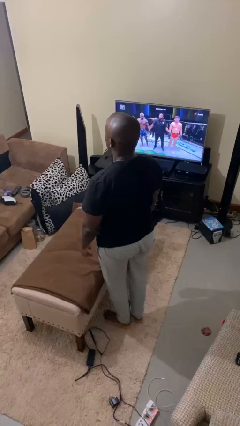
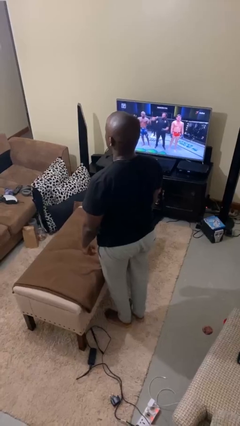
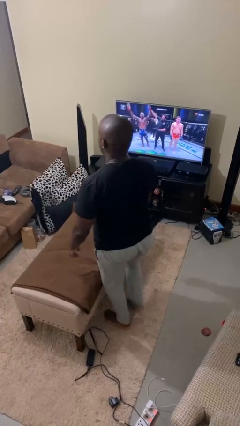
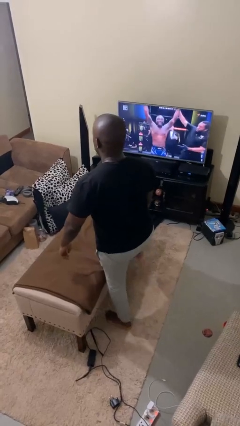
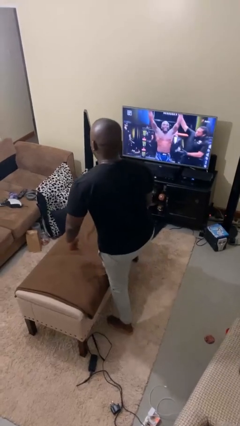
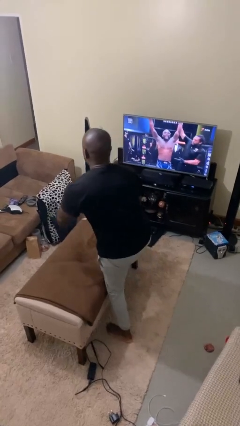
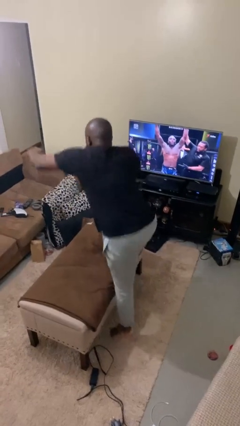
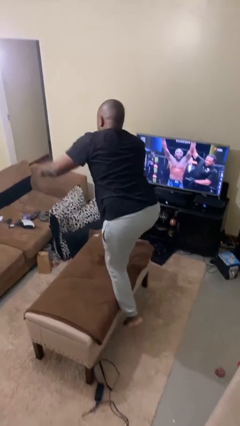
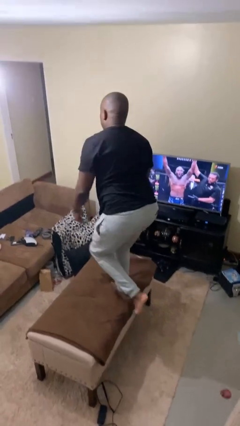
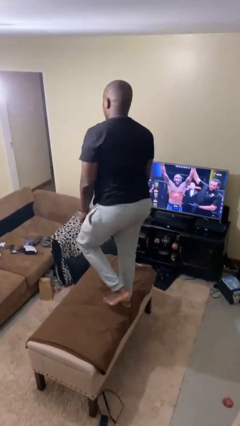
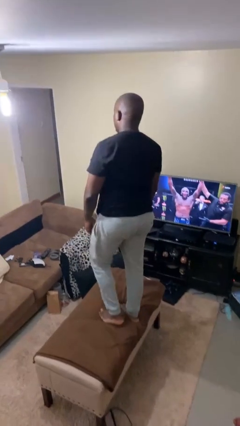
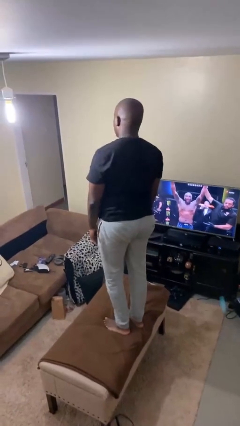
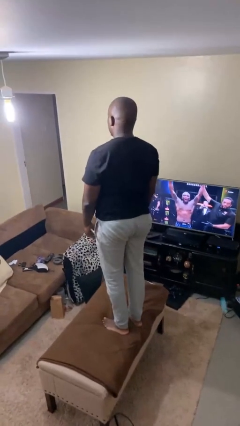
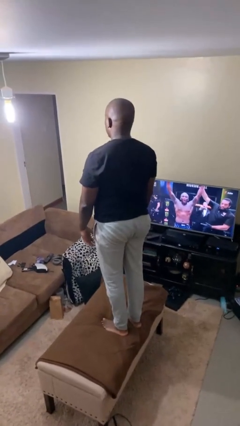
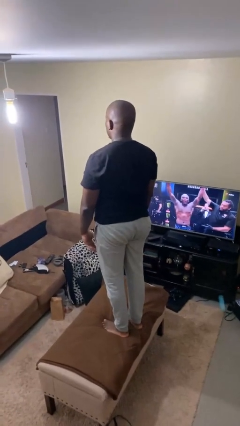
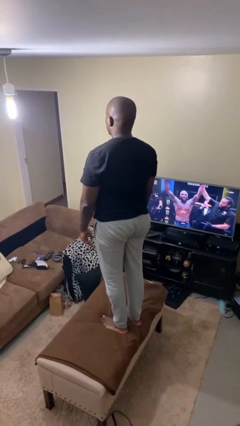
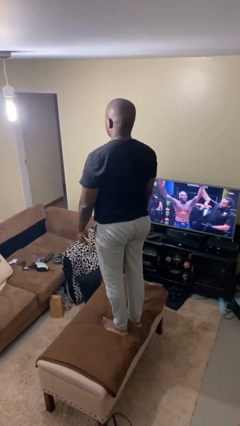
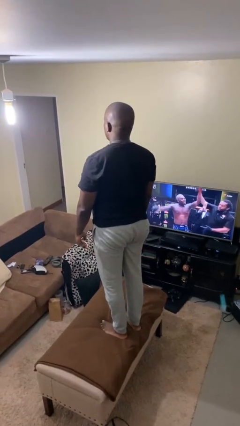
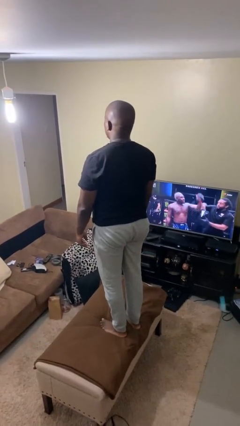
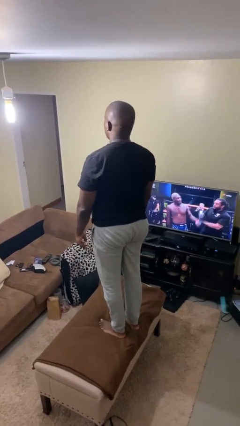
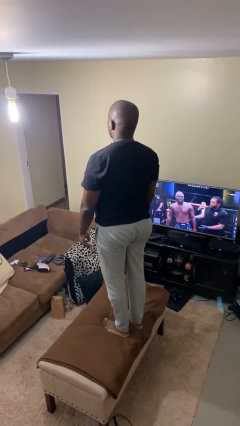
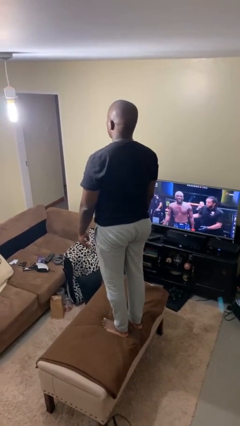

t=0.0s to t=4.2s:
person climbs on table

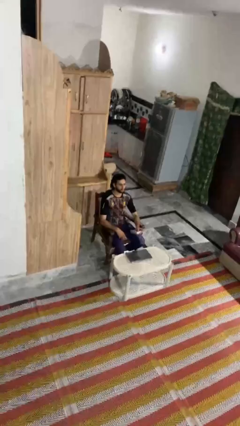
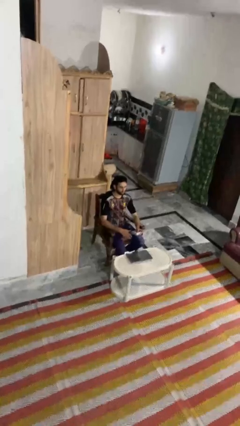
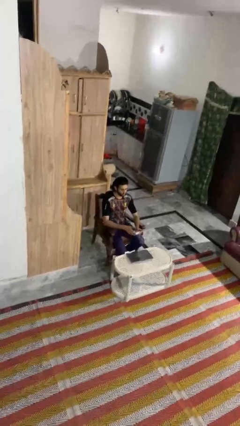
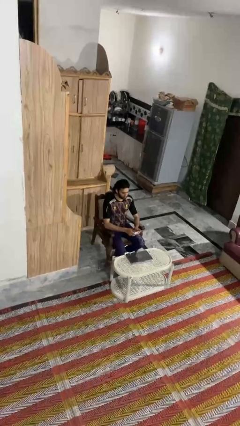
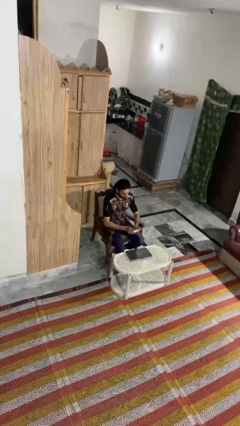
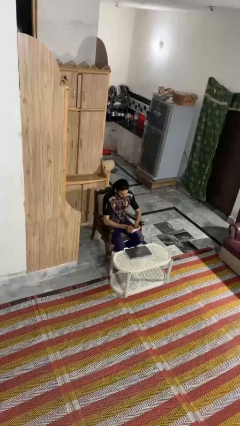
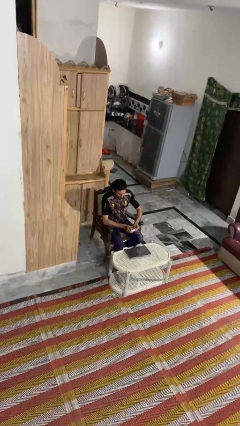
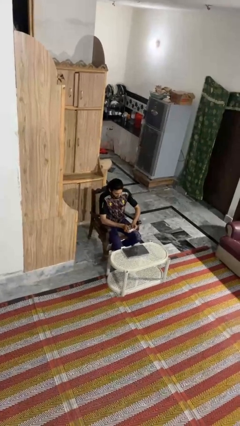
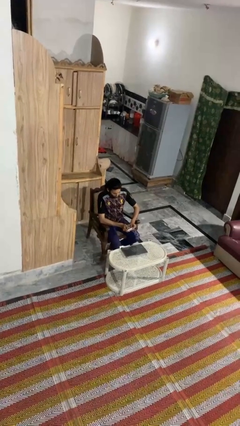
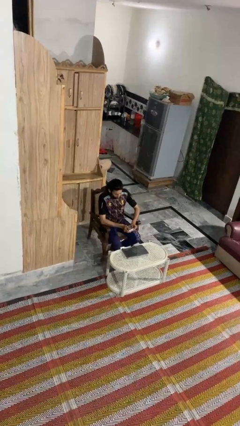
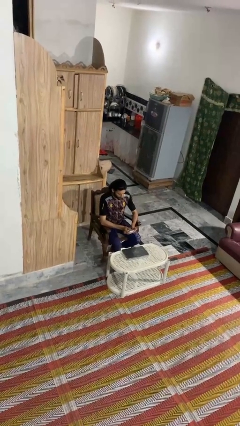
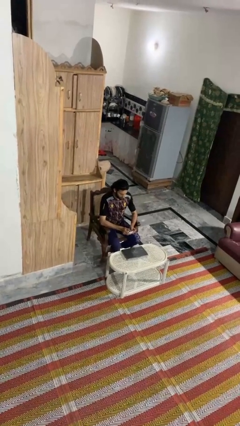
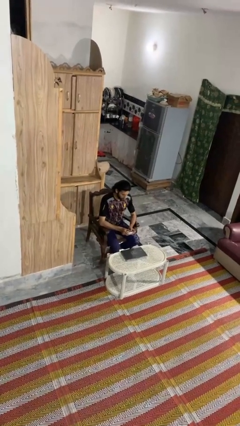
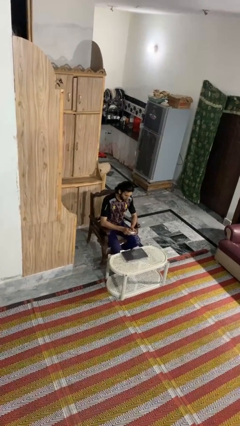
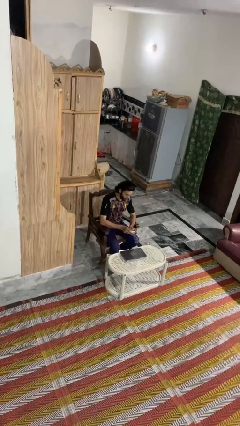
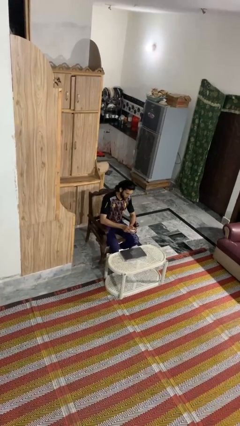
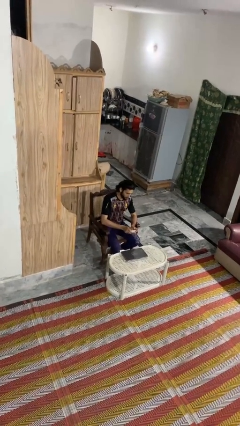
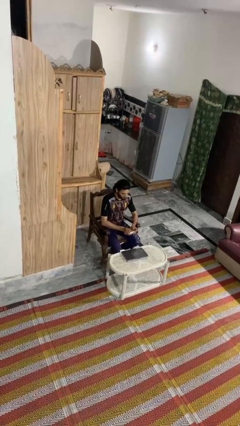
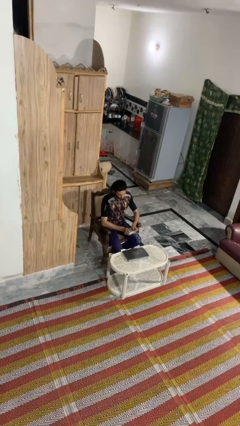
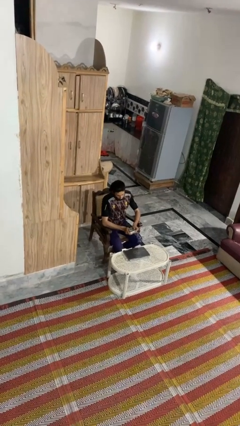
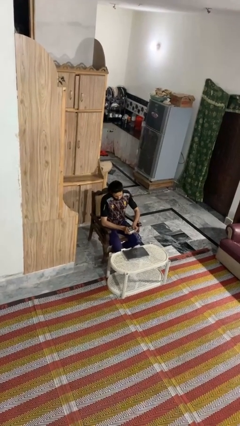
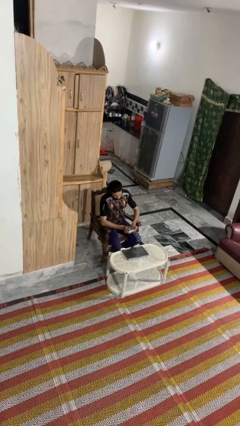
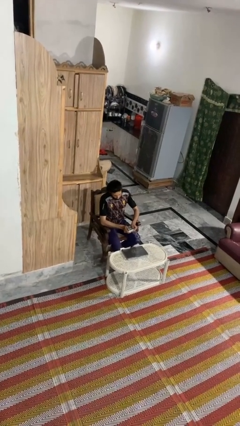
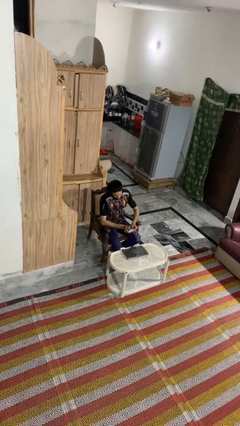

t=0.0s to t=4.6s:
person interacts with handheld game

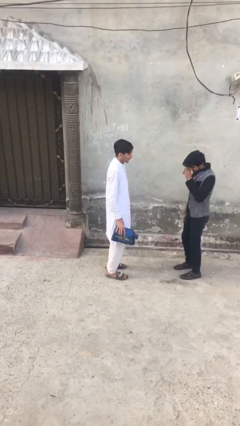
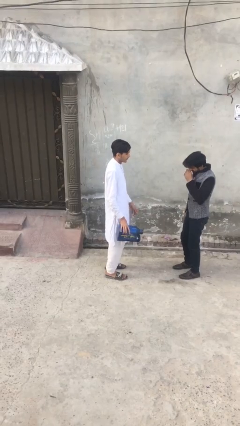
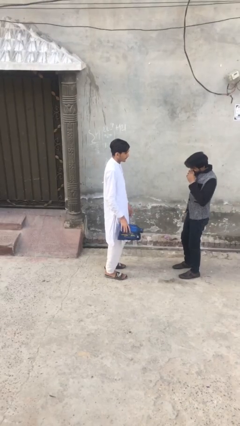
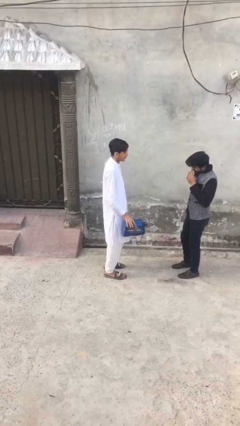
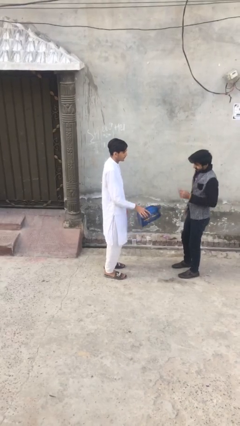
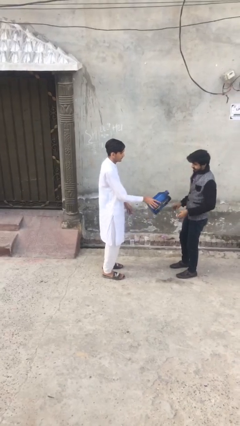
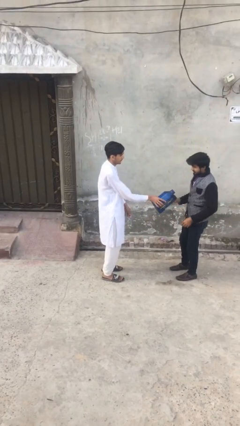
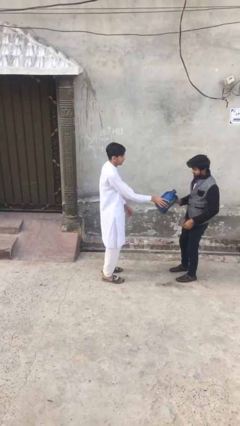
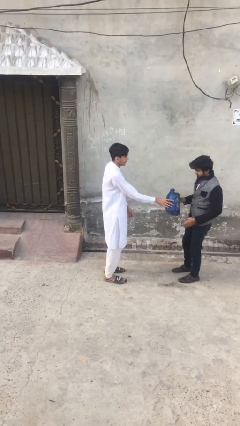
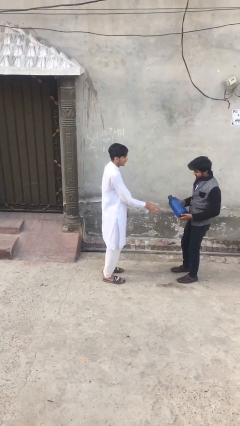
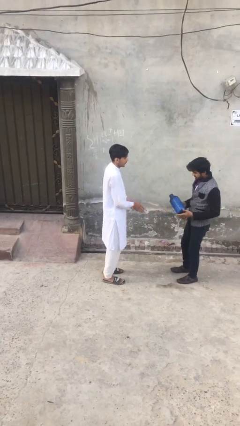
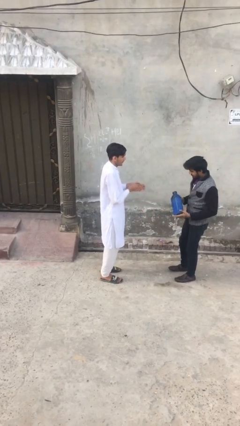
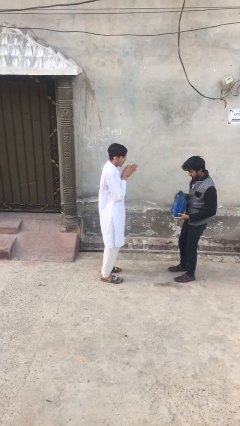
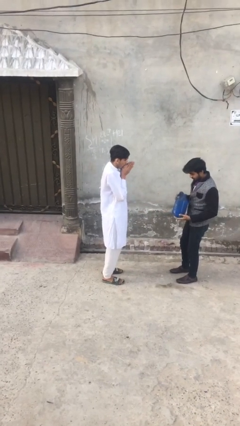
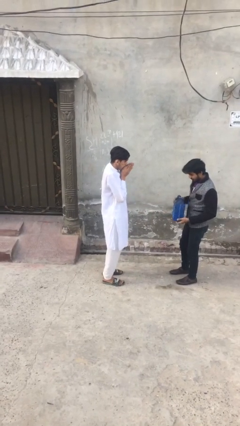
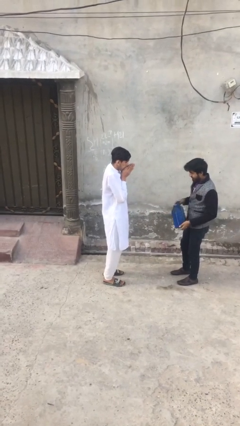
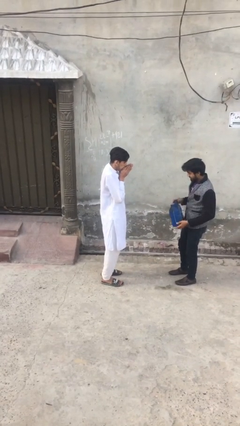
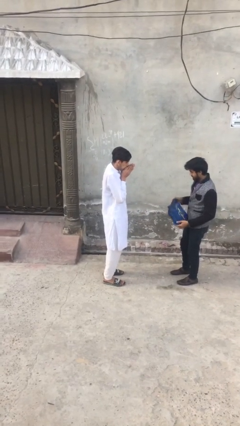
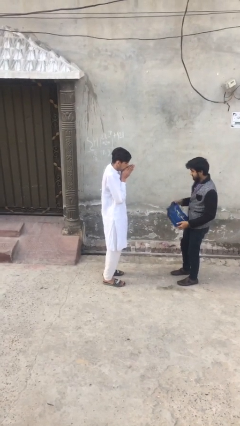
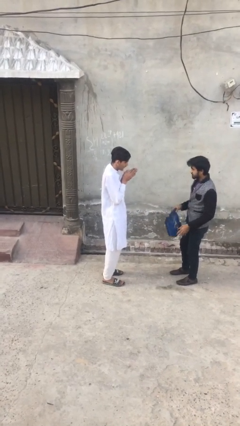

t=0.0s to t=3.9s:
person transfers object to person

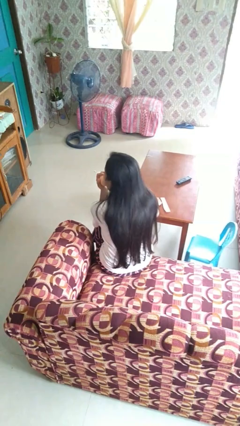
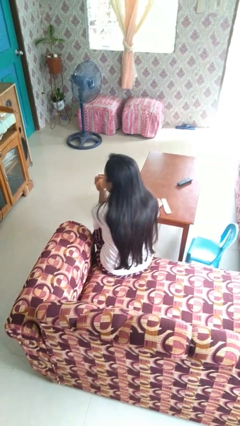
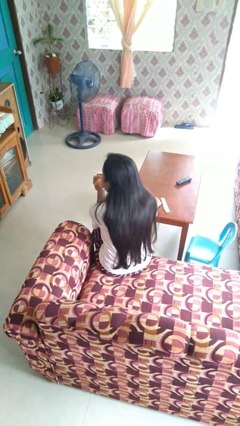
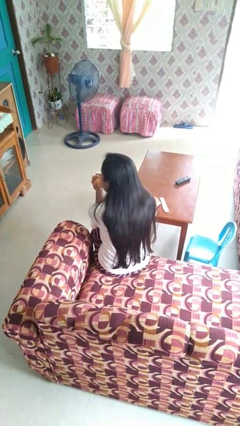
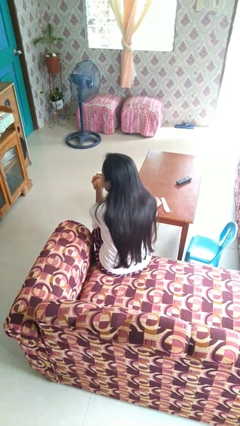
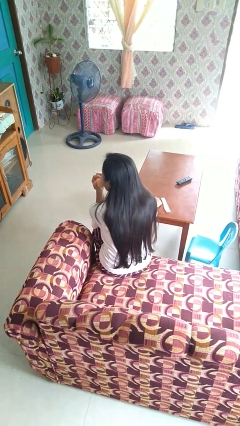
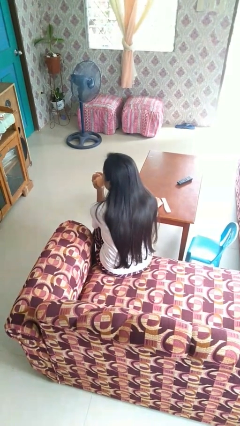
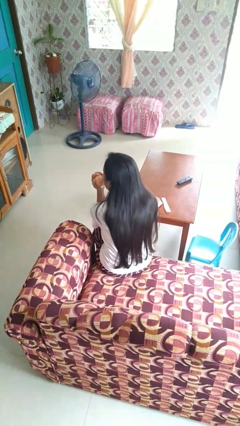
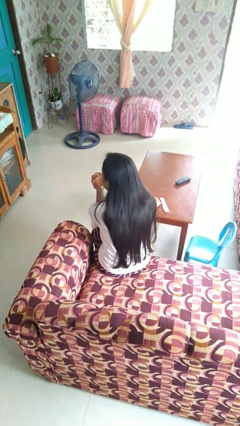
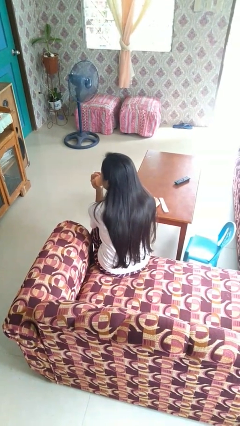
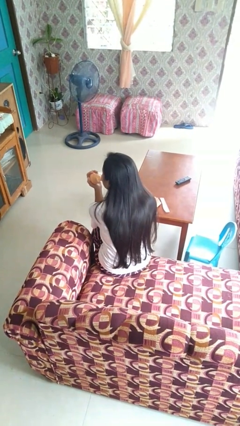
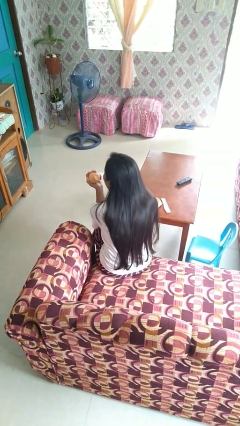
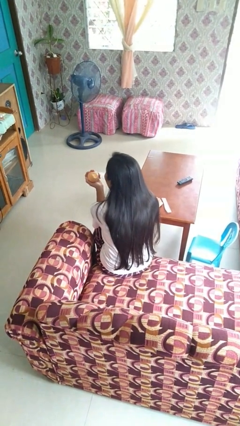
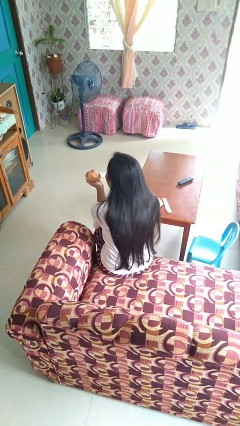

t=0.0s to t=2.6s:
person eats apple

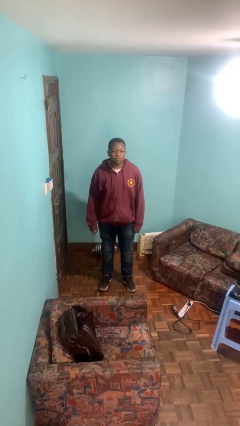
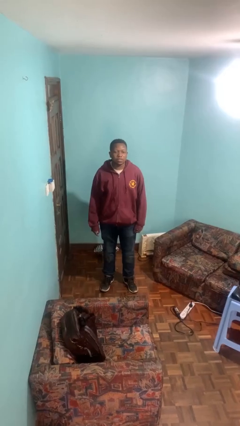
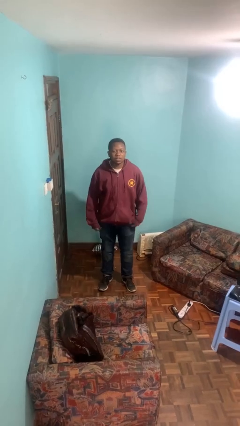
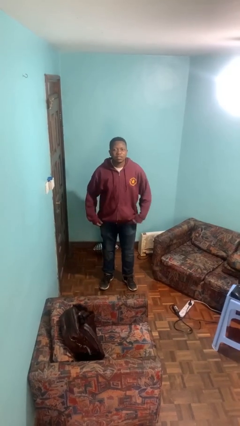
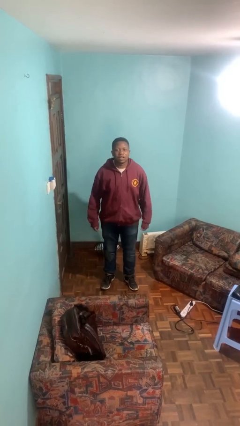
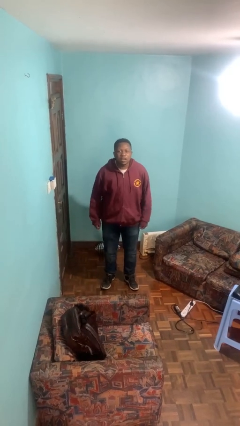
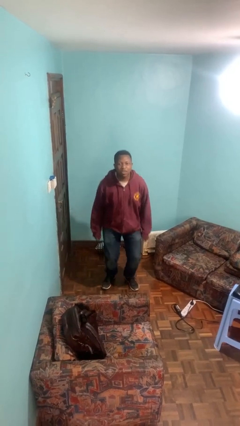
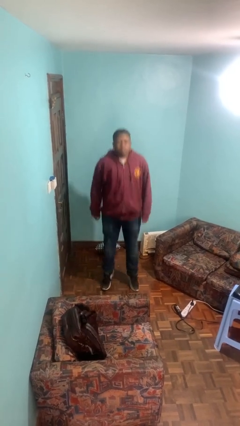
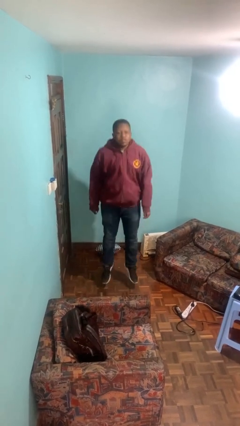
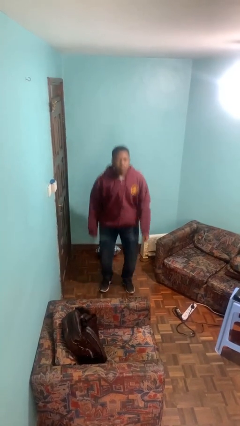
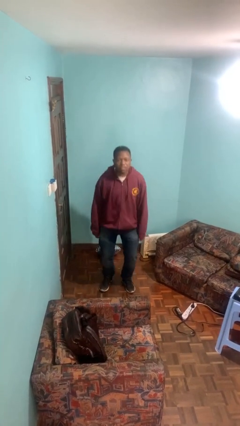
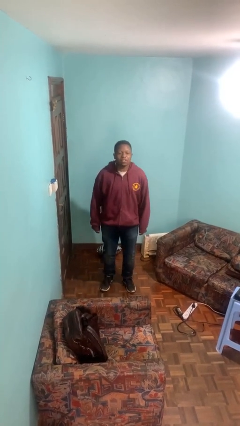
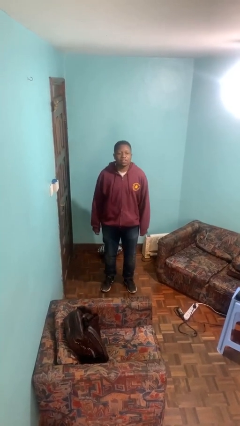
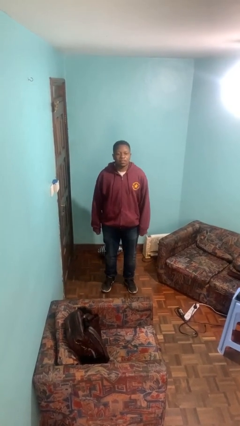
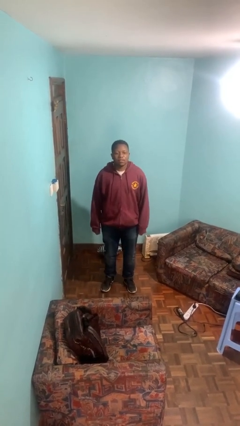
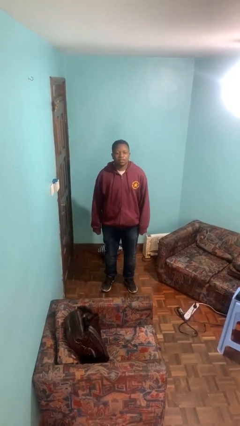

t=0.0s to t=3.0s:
person jumps
